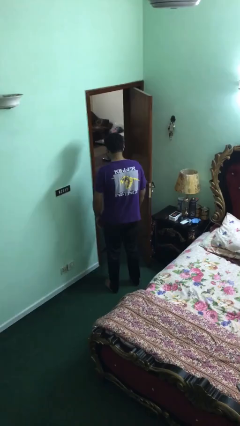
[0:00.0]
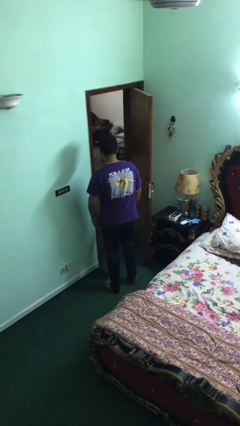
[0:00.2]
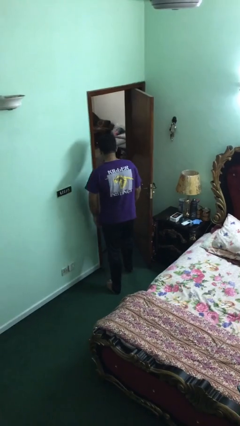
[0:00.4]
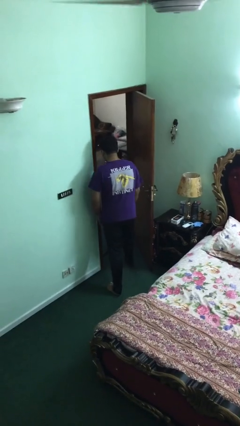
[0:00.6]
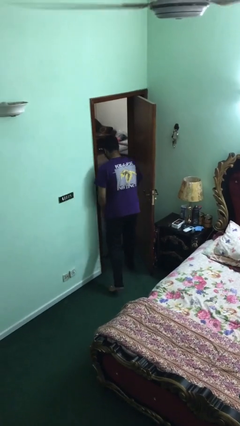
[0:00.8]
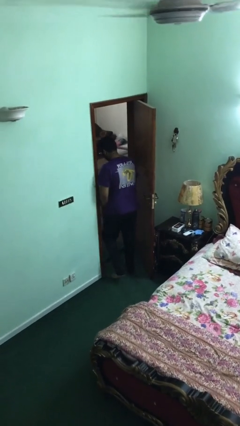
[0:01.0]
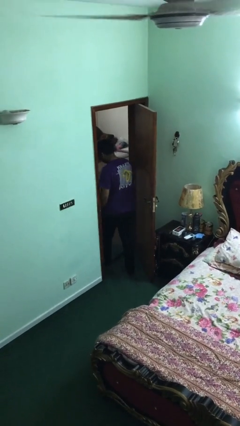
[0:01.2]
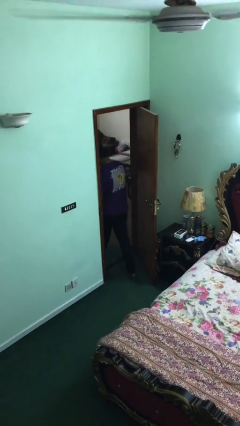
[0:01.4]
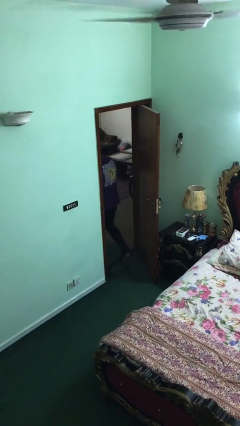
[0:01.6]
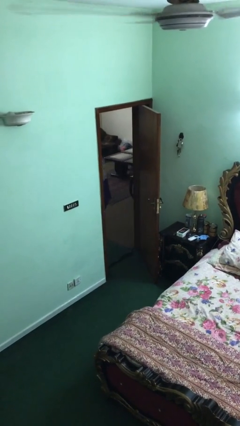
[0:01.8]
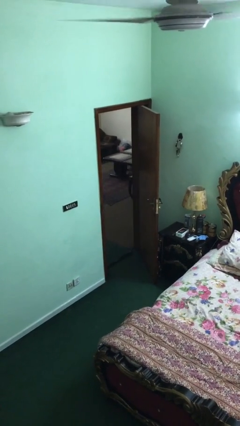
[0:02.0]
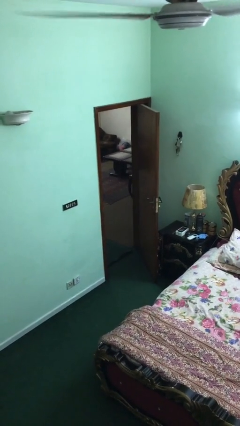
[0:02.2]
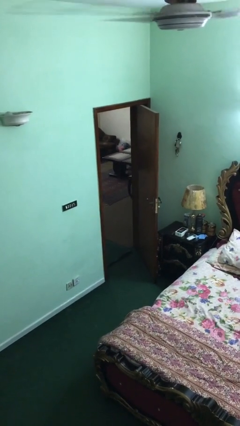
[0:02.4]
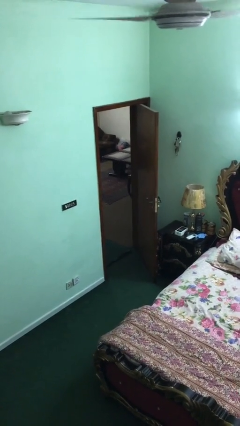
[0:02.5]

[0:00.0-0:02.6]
person exits scene through structure

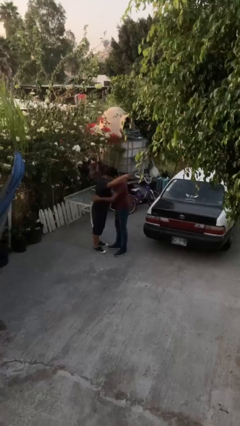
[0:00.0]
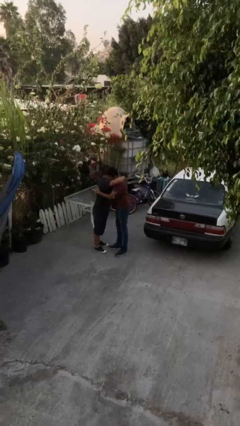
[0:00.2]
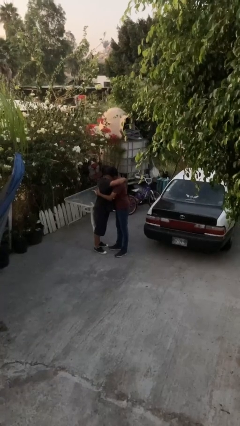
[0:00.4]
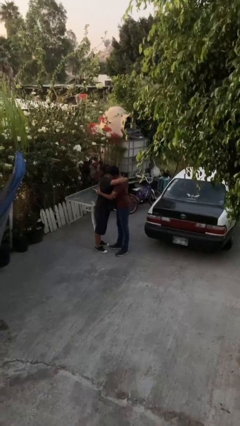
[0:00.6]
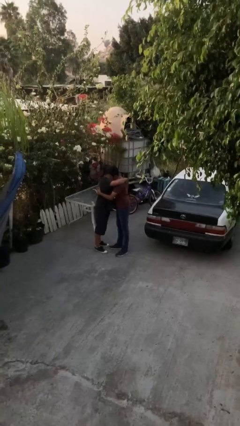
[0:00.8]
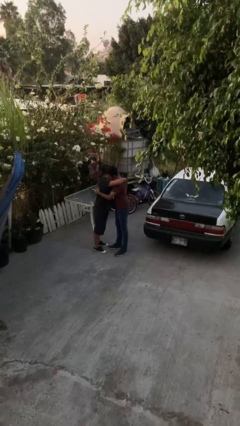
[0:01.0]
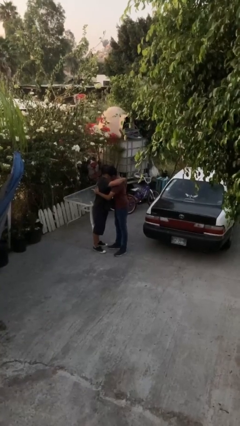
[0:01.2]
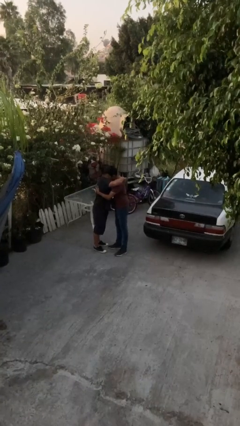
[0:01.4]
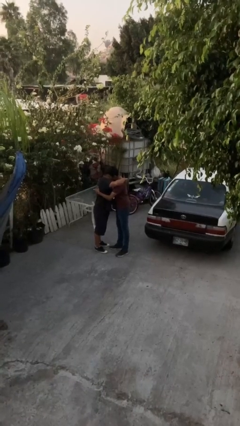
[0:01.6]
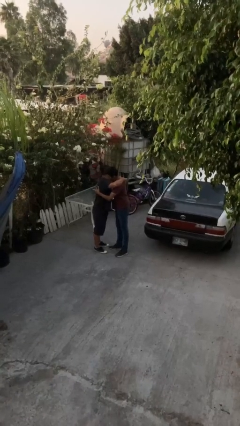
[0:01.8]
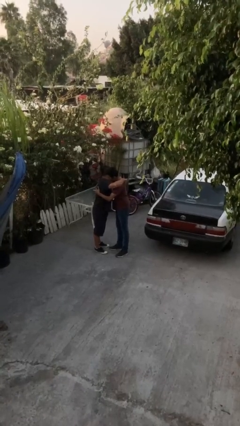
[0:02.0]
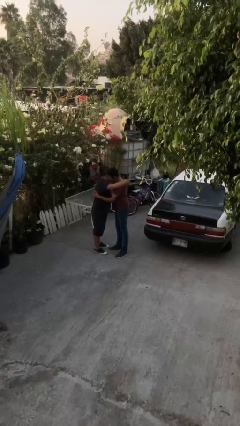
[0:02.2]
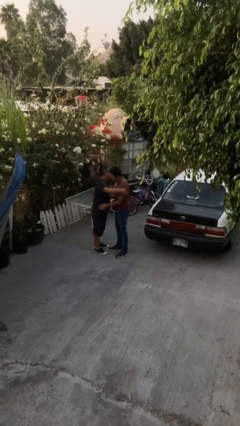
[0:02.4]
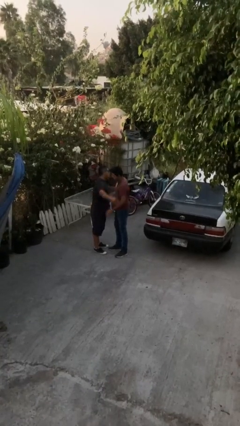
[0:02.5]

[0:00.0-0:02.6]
person embraces person

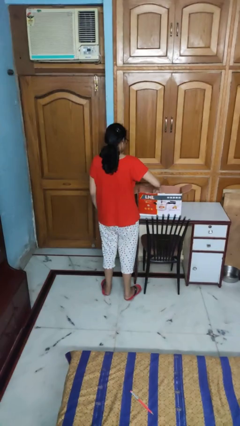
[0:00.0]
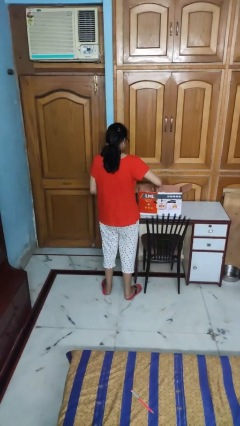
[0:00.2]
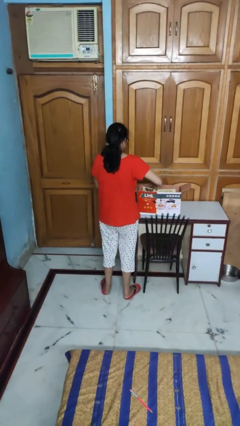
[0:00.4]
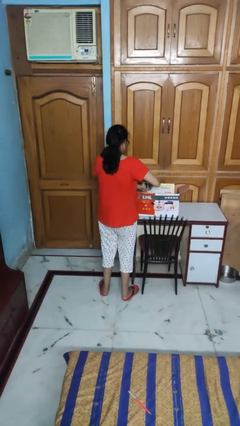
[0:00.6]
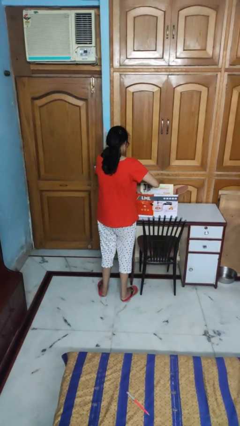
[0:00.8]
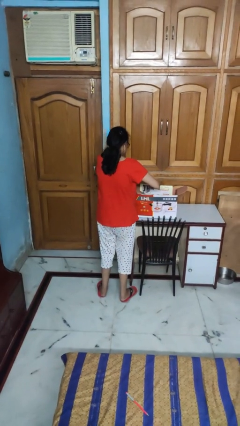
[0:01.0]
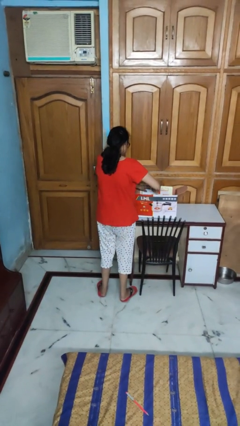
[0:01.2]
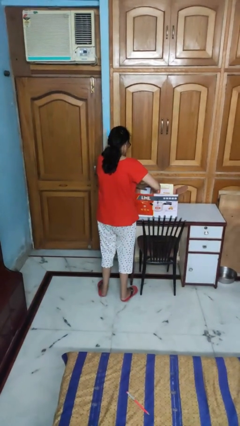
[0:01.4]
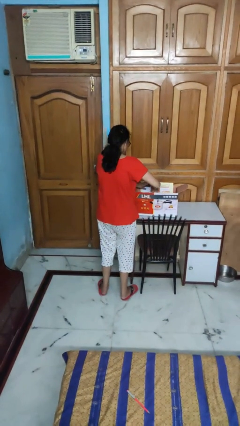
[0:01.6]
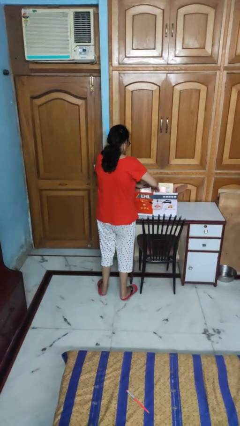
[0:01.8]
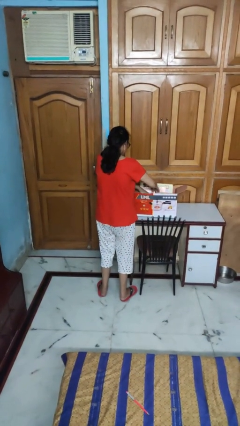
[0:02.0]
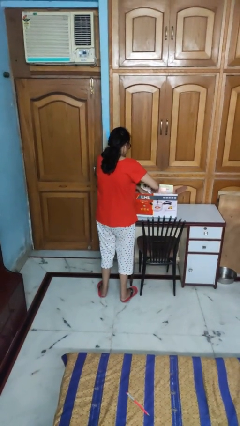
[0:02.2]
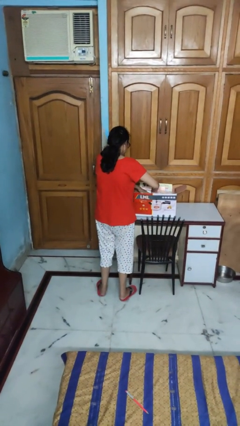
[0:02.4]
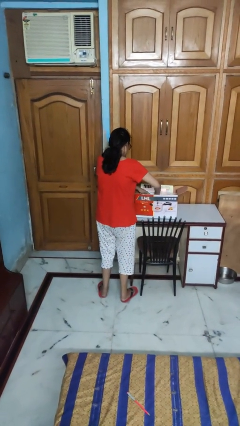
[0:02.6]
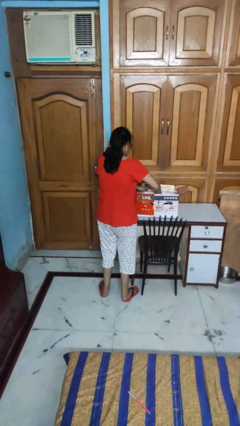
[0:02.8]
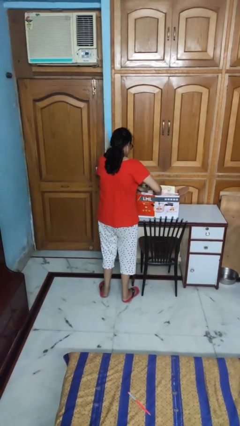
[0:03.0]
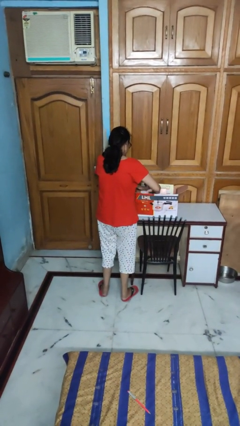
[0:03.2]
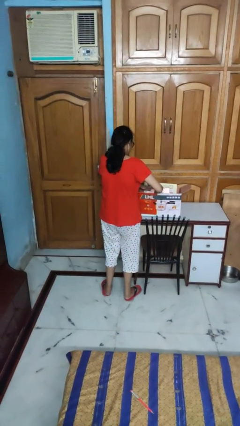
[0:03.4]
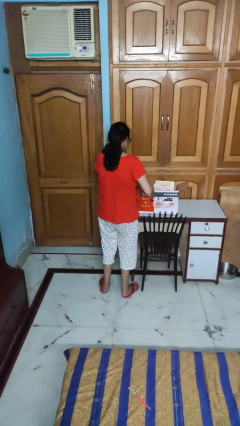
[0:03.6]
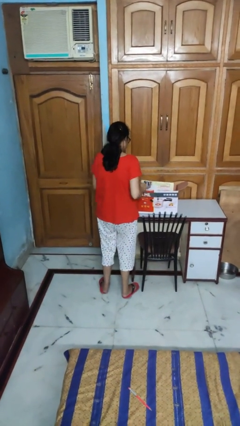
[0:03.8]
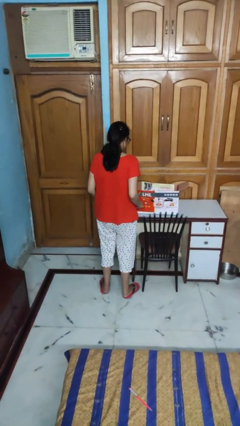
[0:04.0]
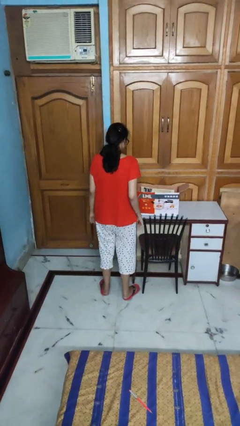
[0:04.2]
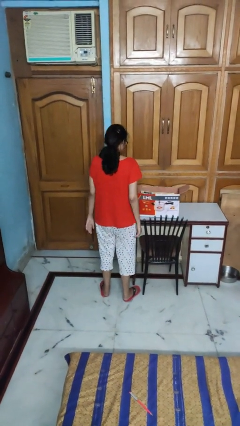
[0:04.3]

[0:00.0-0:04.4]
person searches in box

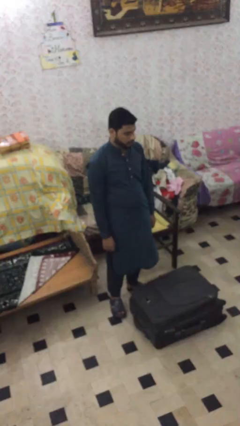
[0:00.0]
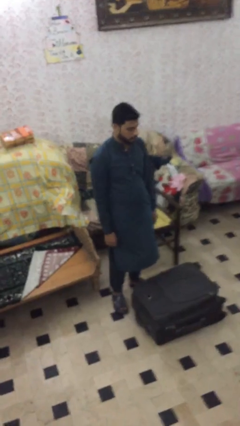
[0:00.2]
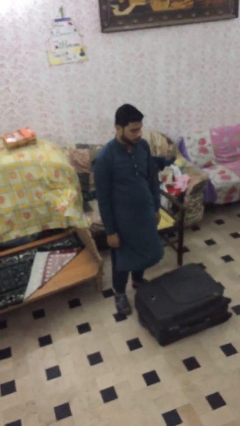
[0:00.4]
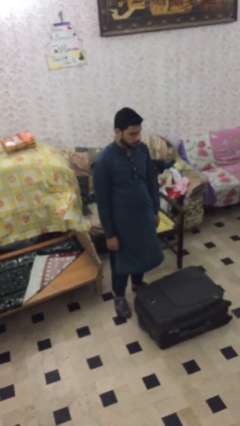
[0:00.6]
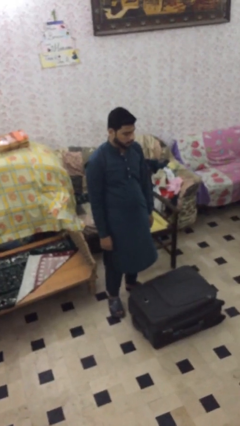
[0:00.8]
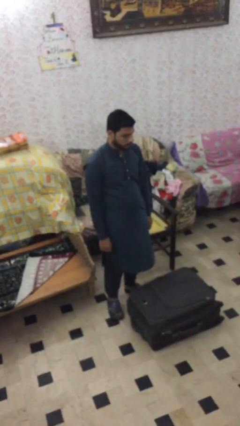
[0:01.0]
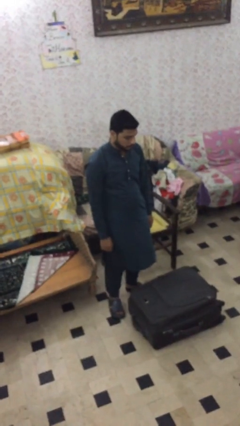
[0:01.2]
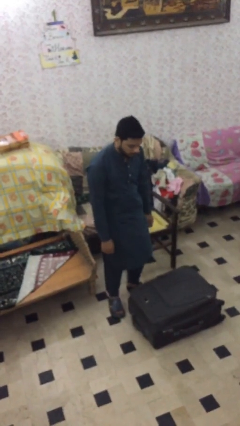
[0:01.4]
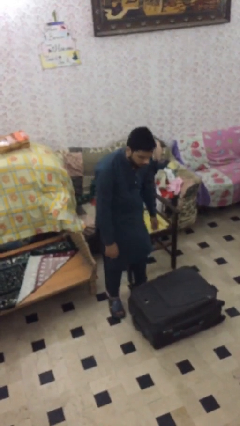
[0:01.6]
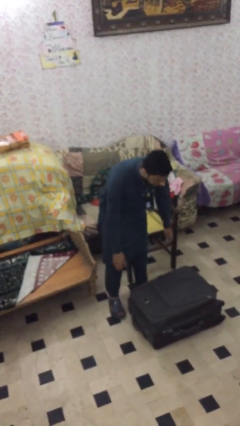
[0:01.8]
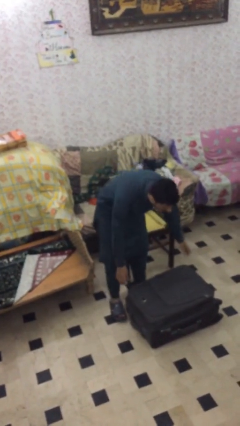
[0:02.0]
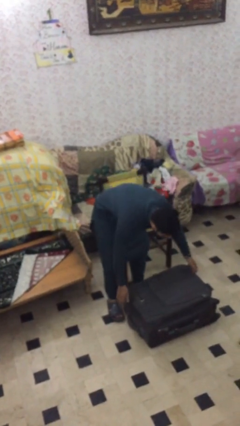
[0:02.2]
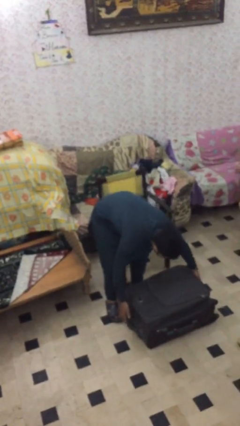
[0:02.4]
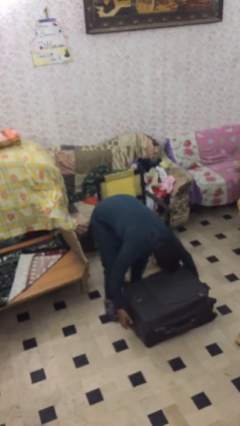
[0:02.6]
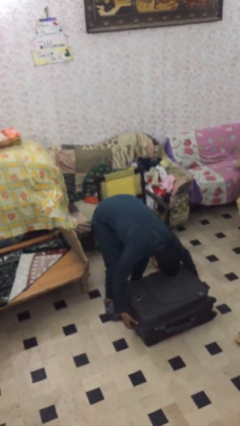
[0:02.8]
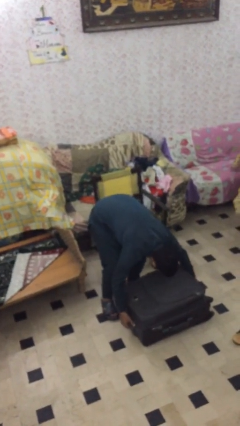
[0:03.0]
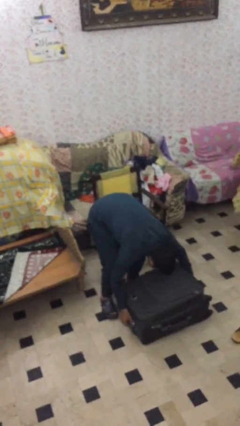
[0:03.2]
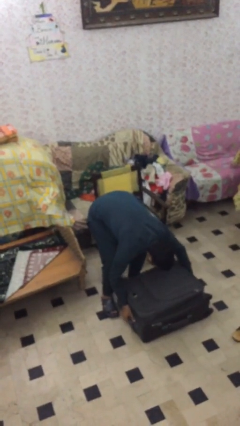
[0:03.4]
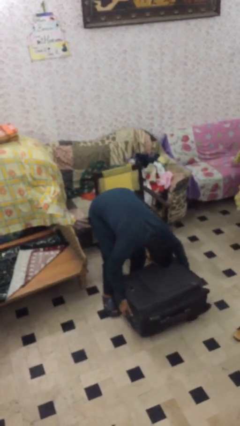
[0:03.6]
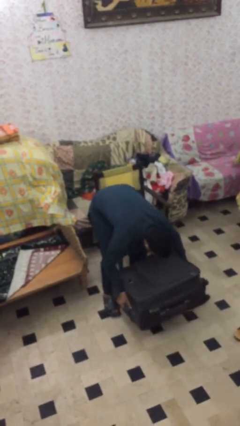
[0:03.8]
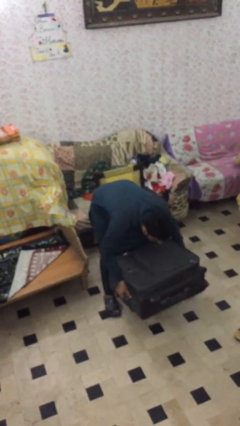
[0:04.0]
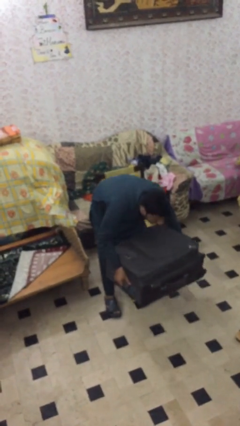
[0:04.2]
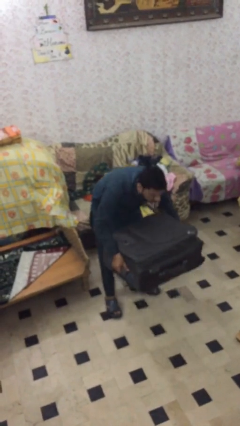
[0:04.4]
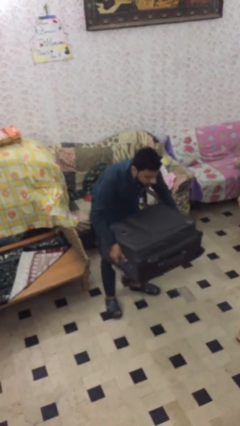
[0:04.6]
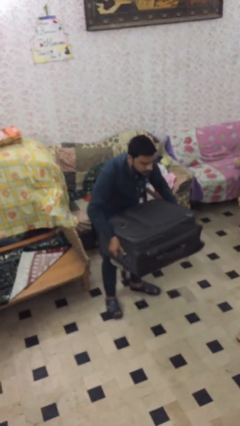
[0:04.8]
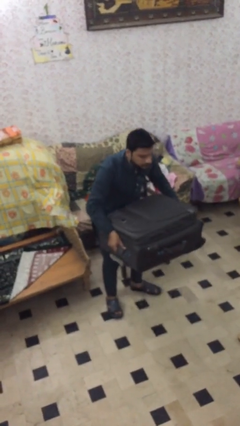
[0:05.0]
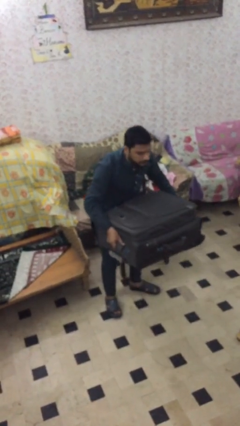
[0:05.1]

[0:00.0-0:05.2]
person picks up object from floor

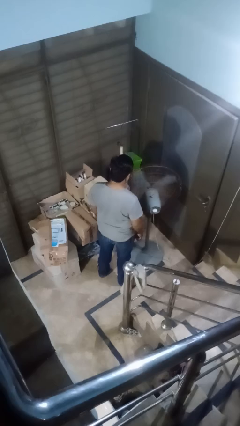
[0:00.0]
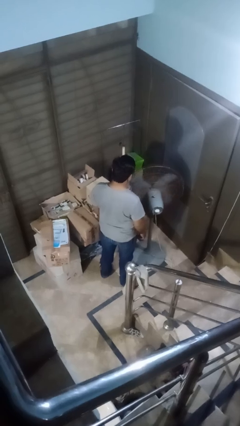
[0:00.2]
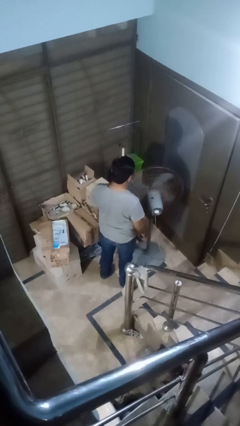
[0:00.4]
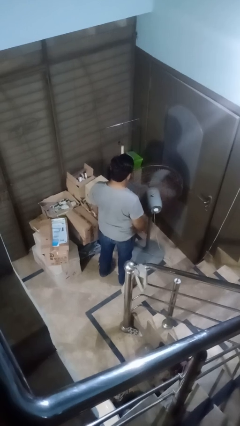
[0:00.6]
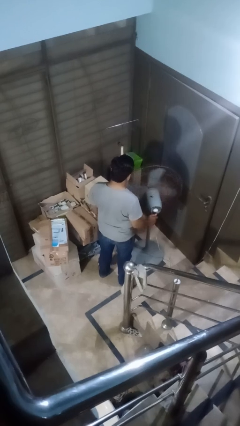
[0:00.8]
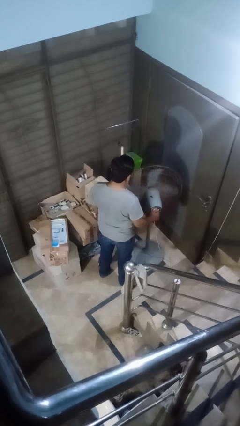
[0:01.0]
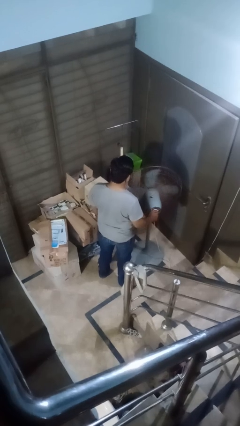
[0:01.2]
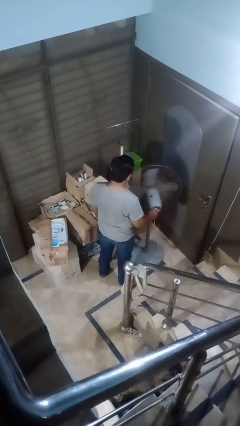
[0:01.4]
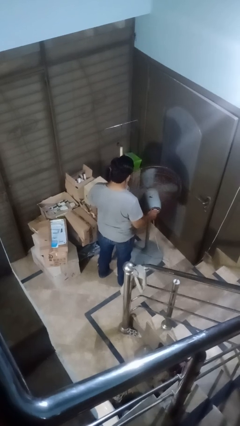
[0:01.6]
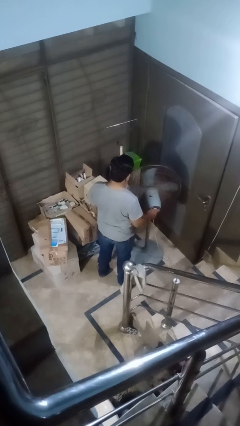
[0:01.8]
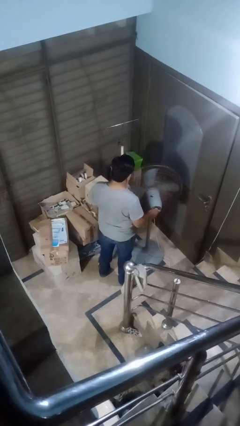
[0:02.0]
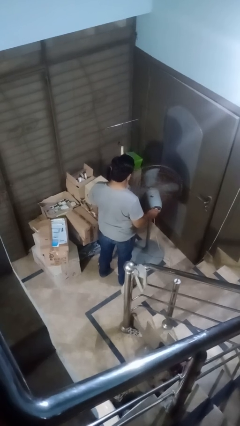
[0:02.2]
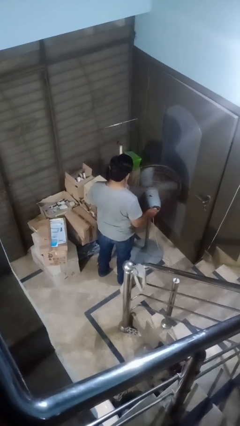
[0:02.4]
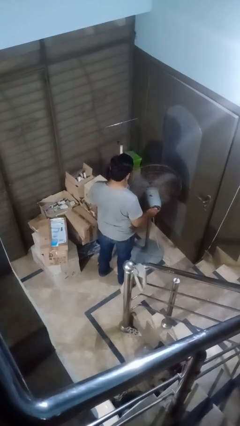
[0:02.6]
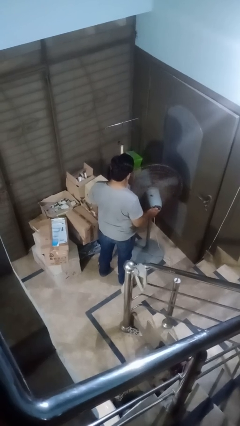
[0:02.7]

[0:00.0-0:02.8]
person turns on fan
